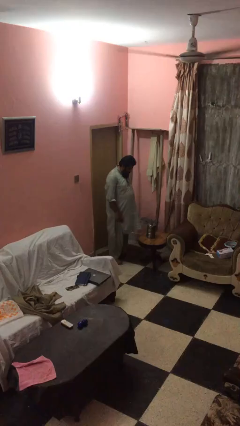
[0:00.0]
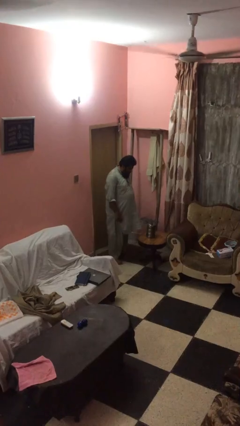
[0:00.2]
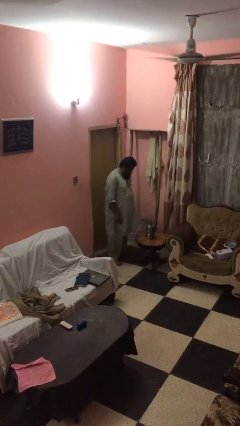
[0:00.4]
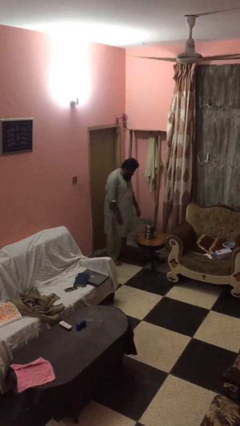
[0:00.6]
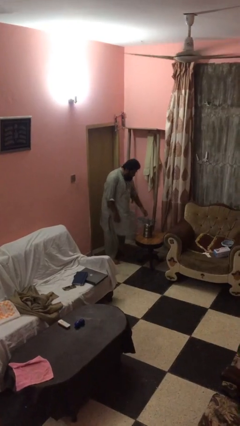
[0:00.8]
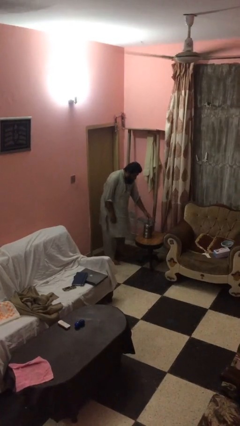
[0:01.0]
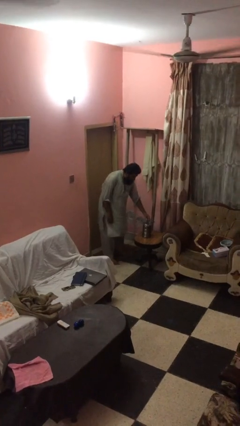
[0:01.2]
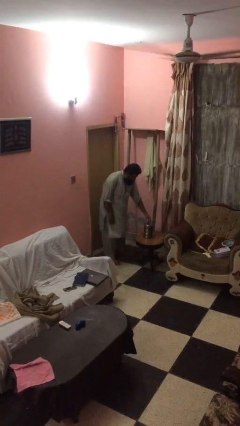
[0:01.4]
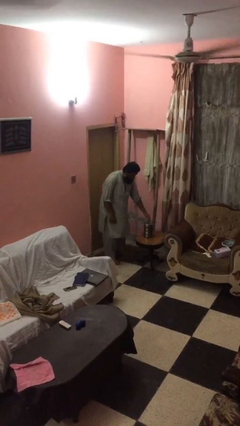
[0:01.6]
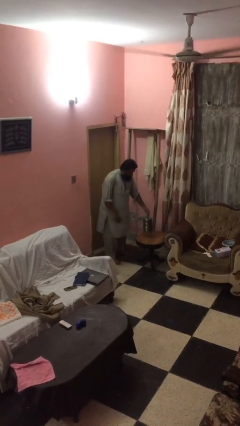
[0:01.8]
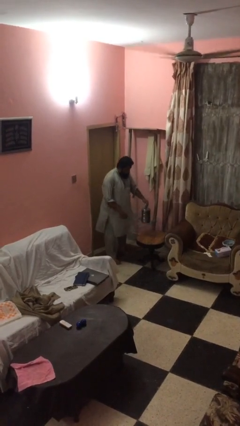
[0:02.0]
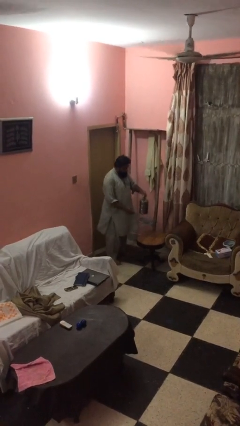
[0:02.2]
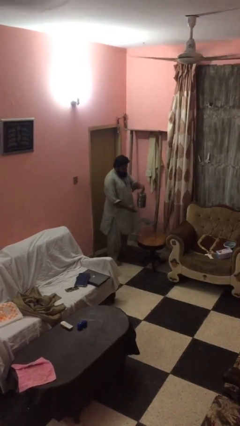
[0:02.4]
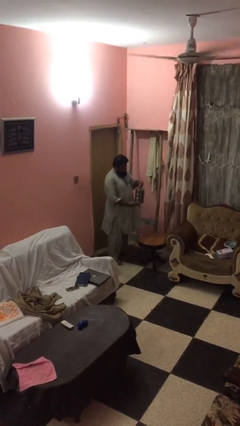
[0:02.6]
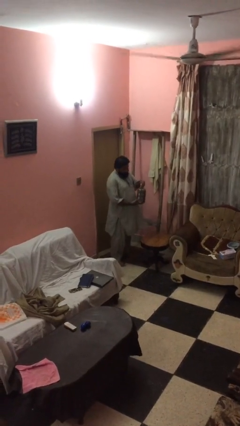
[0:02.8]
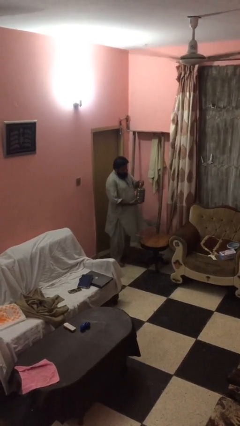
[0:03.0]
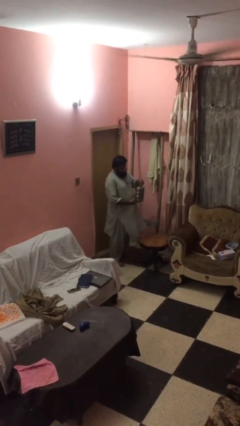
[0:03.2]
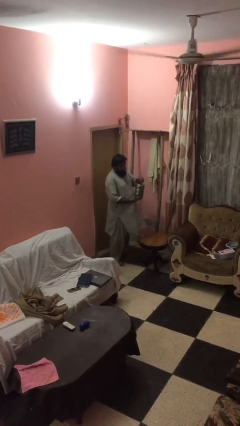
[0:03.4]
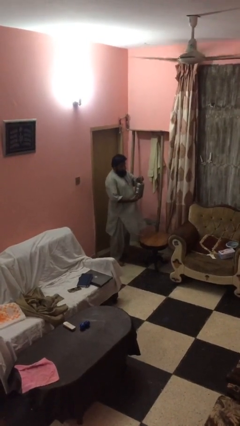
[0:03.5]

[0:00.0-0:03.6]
person picks up object from table

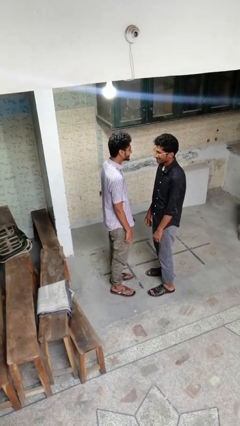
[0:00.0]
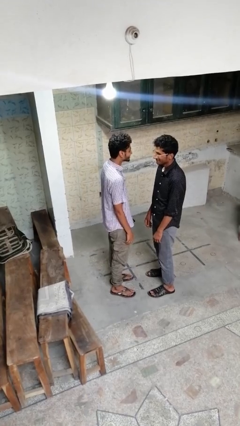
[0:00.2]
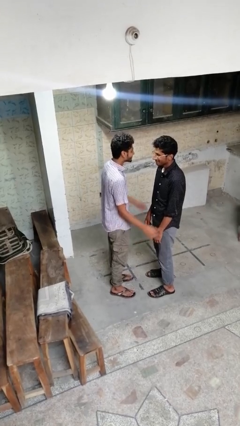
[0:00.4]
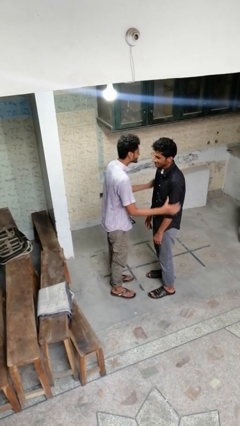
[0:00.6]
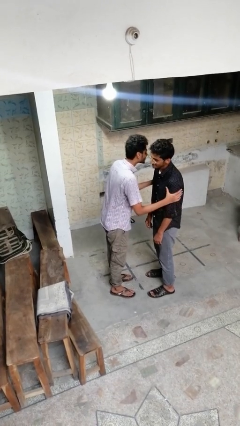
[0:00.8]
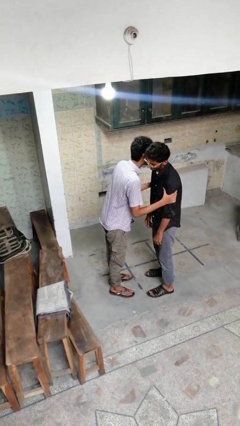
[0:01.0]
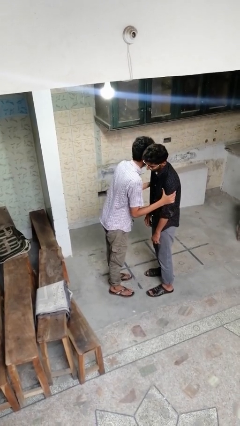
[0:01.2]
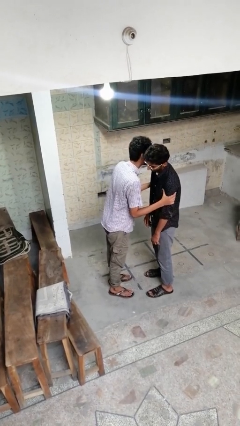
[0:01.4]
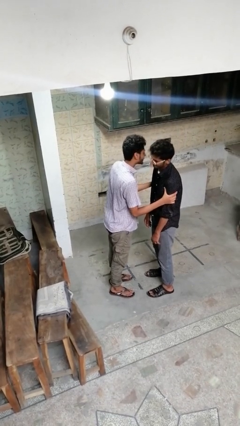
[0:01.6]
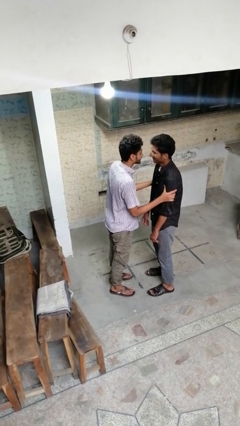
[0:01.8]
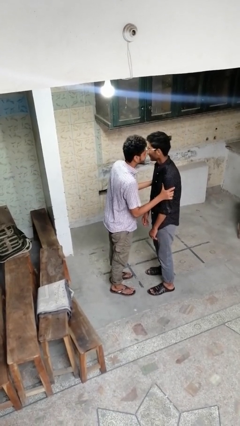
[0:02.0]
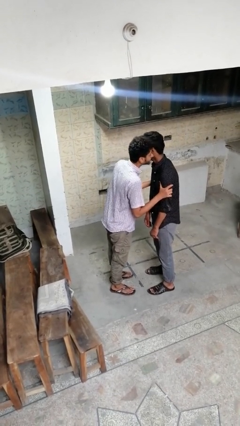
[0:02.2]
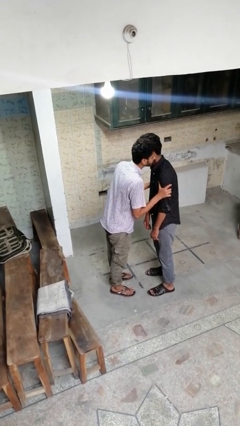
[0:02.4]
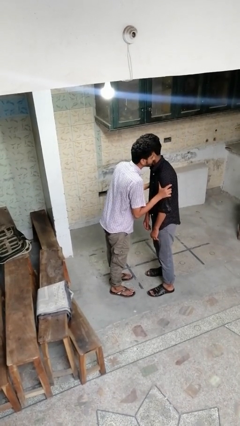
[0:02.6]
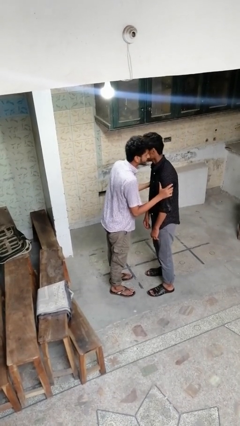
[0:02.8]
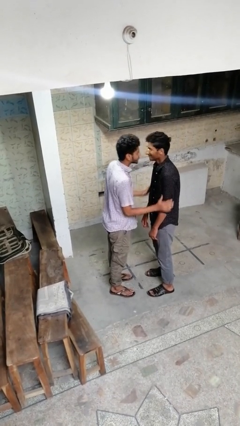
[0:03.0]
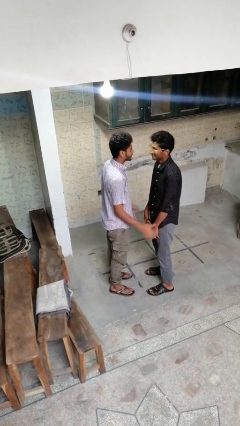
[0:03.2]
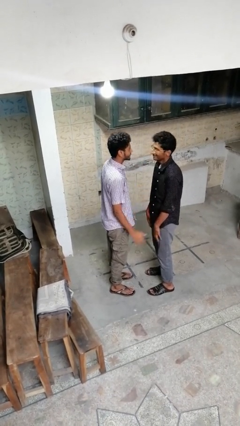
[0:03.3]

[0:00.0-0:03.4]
person kisses cheek of person

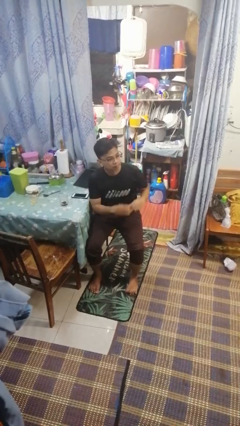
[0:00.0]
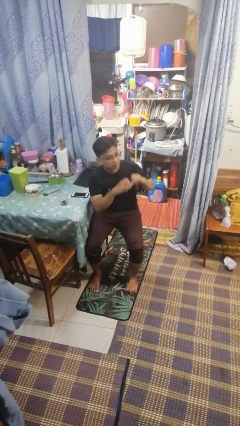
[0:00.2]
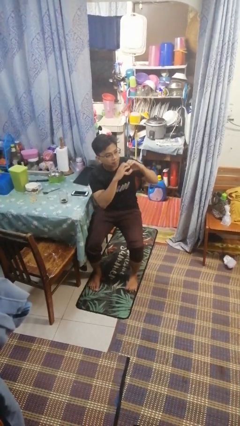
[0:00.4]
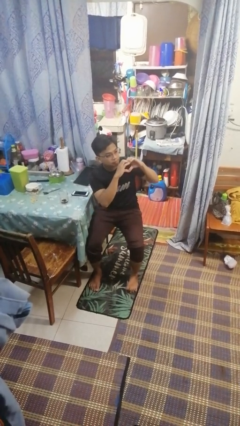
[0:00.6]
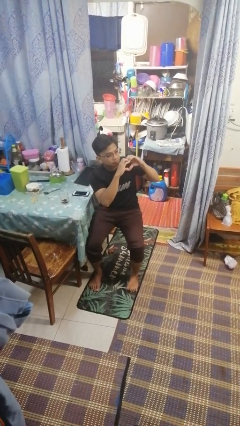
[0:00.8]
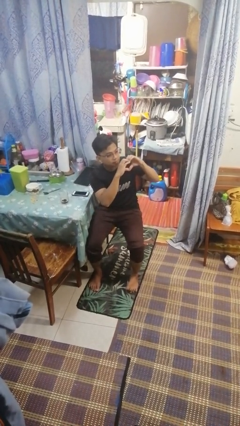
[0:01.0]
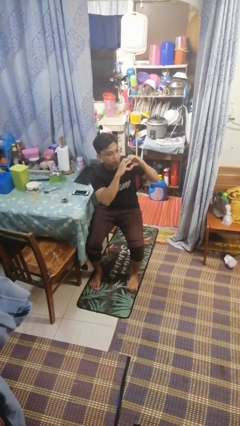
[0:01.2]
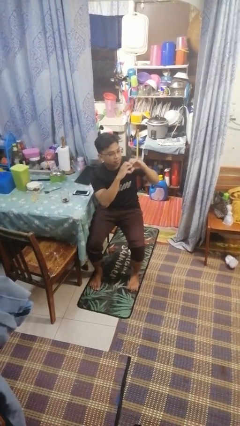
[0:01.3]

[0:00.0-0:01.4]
person gestures heart

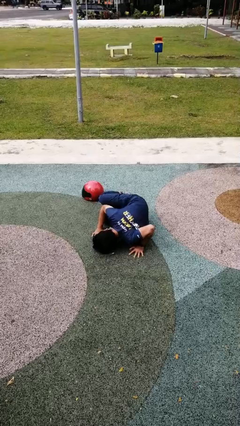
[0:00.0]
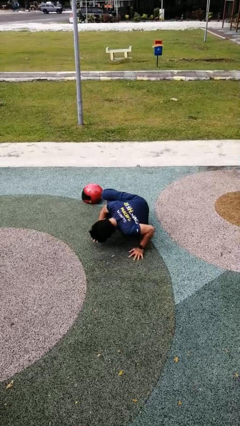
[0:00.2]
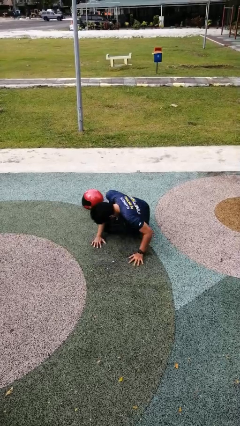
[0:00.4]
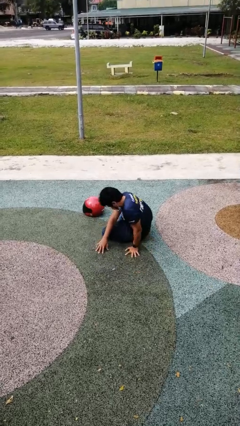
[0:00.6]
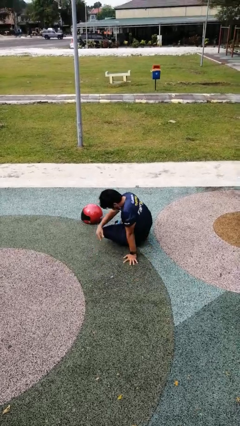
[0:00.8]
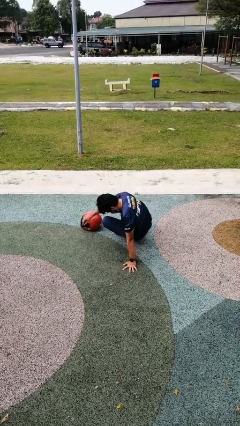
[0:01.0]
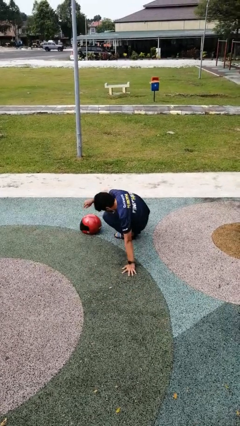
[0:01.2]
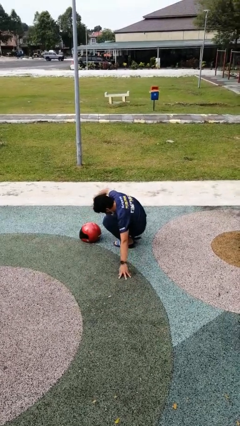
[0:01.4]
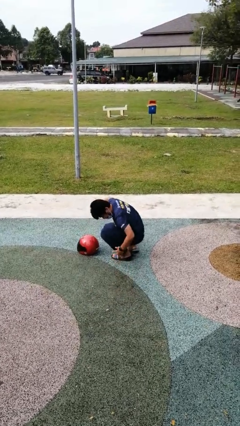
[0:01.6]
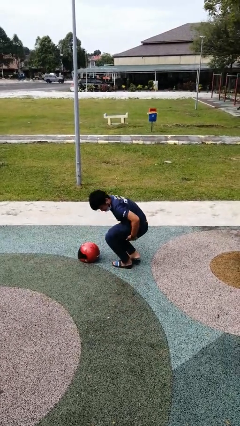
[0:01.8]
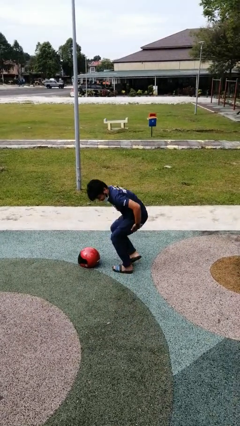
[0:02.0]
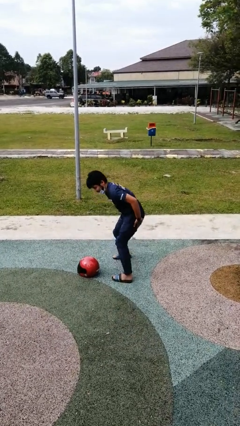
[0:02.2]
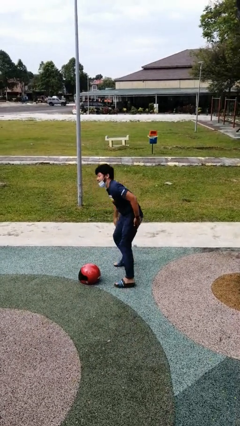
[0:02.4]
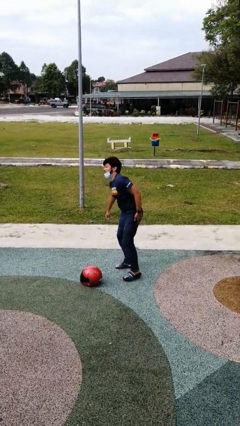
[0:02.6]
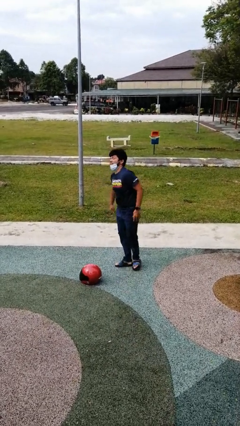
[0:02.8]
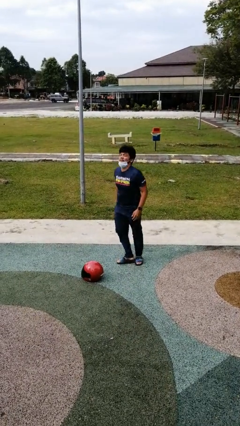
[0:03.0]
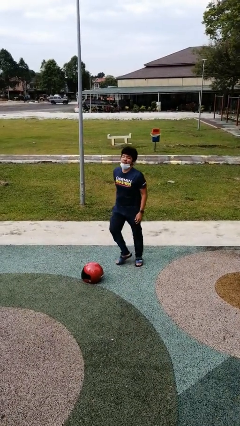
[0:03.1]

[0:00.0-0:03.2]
person stands up from floor

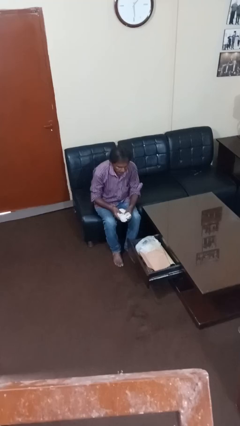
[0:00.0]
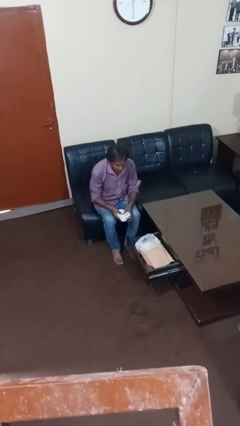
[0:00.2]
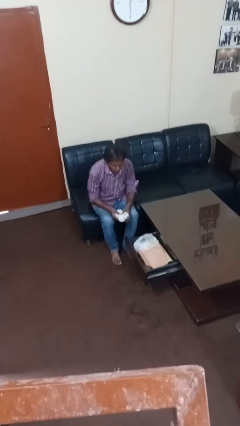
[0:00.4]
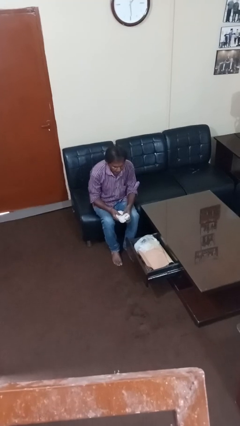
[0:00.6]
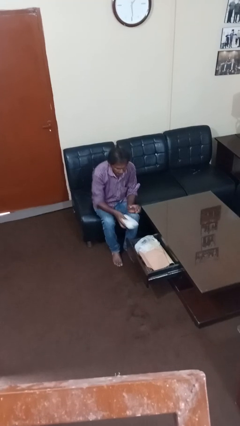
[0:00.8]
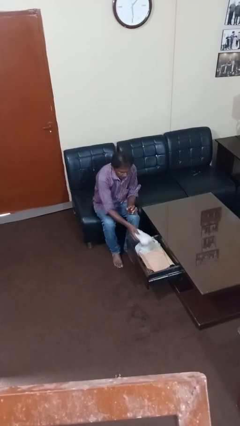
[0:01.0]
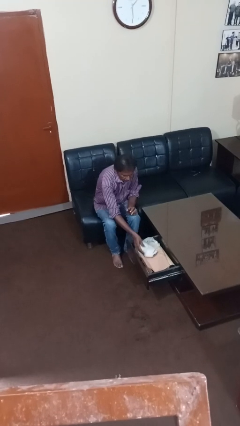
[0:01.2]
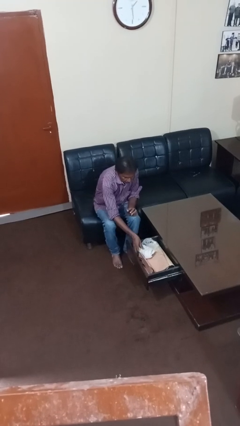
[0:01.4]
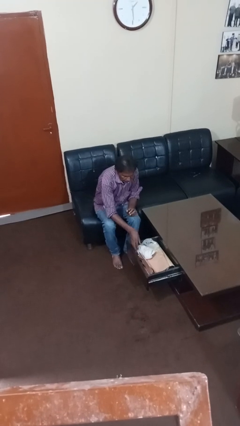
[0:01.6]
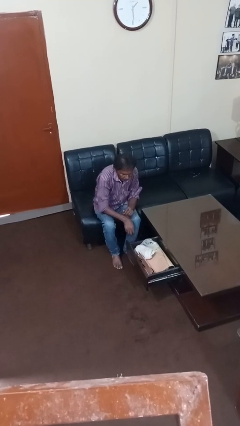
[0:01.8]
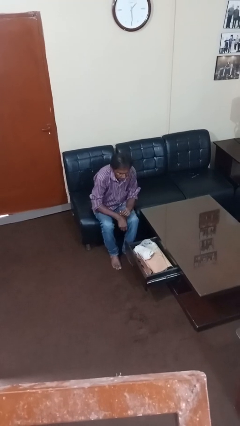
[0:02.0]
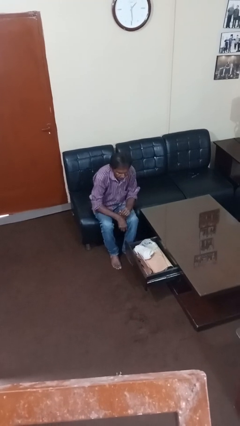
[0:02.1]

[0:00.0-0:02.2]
person puts clothes into dresser

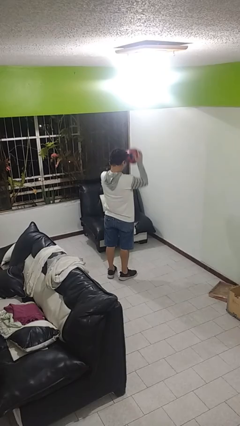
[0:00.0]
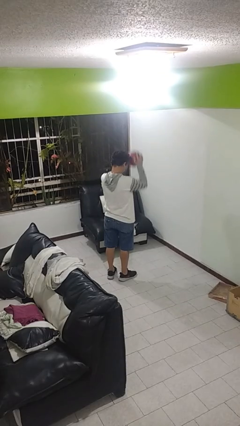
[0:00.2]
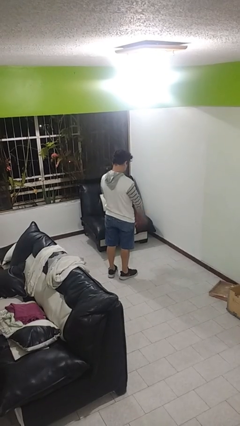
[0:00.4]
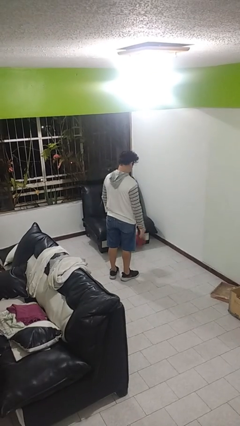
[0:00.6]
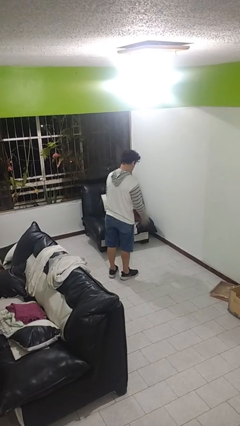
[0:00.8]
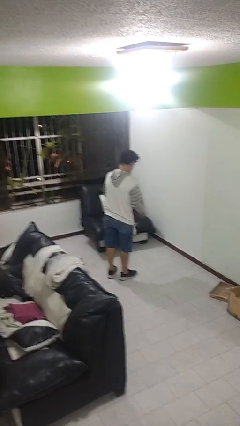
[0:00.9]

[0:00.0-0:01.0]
person bounces ball on floor

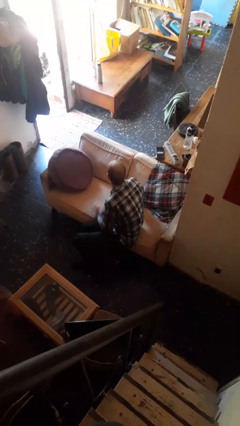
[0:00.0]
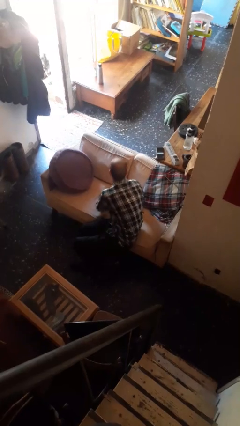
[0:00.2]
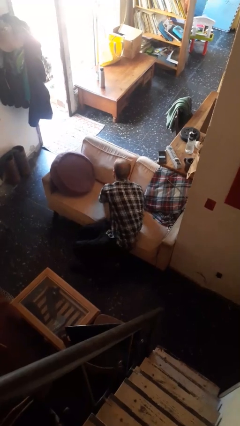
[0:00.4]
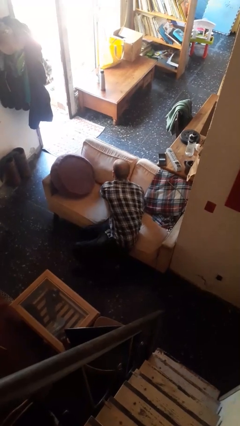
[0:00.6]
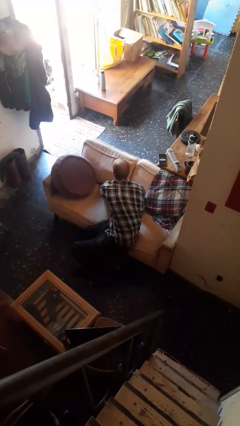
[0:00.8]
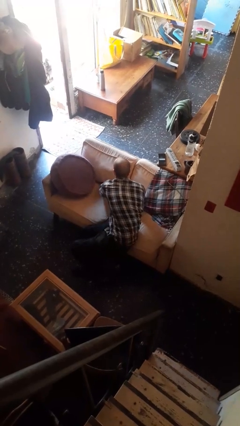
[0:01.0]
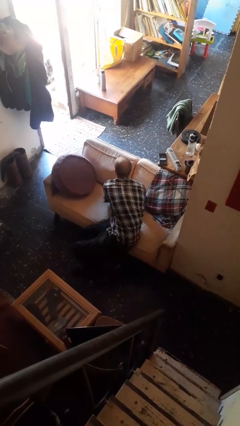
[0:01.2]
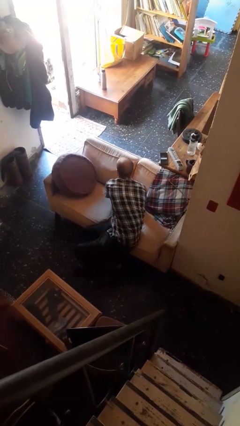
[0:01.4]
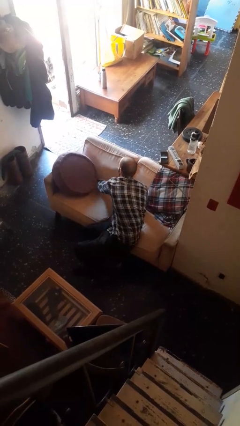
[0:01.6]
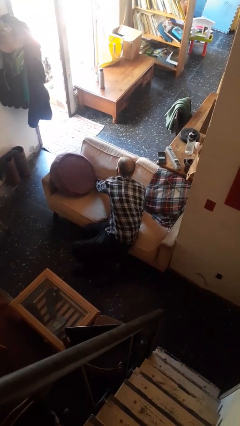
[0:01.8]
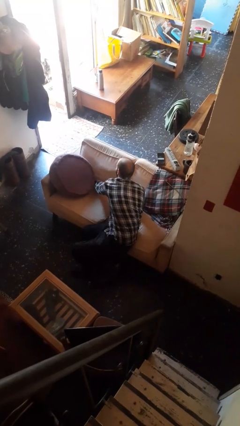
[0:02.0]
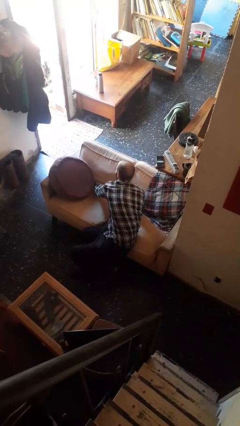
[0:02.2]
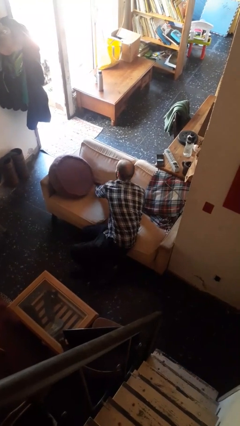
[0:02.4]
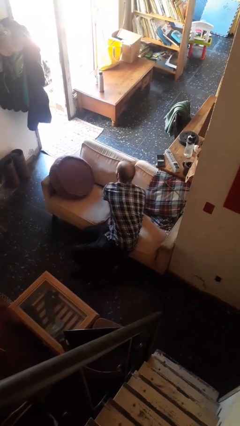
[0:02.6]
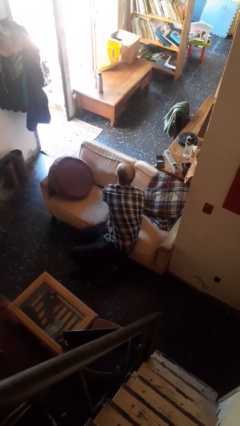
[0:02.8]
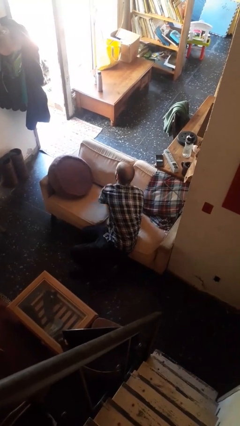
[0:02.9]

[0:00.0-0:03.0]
person searches in couch
